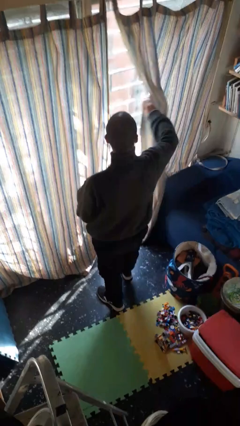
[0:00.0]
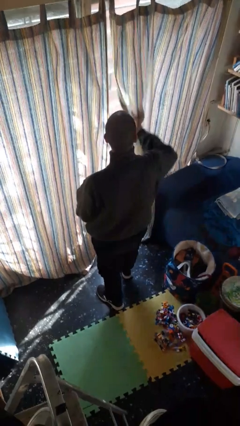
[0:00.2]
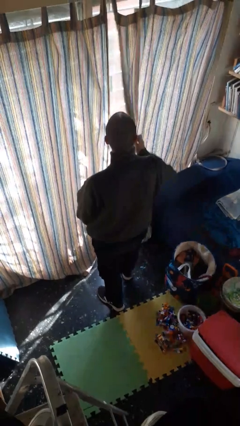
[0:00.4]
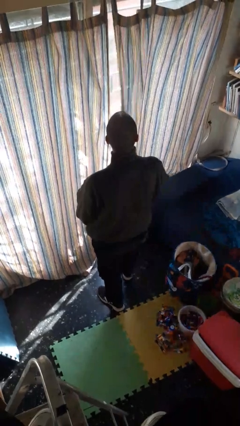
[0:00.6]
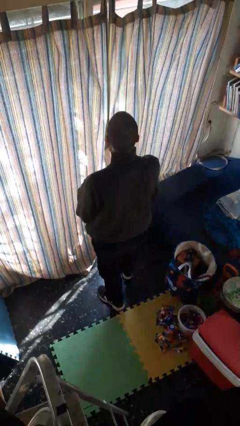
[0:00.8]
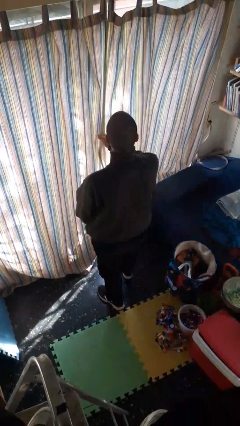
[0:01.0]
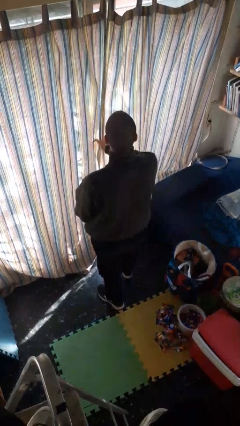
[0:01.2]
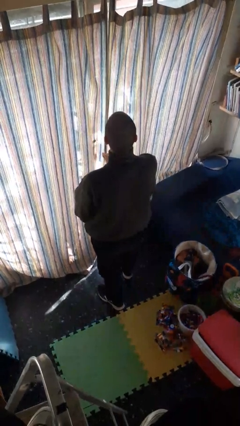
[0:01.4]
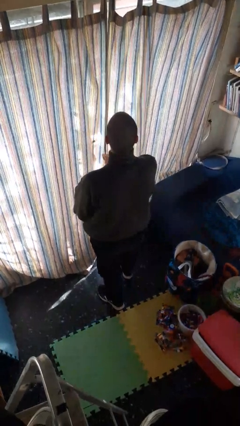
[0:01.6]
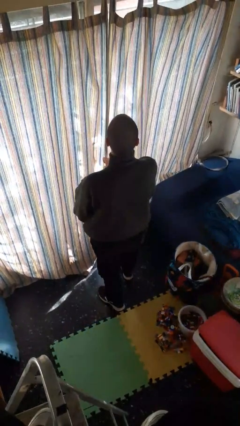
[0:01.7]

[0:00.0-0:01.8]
person closes curtains

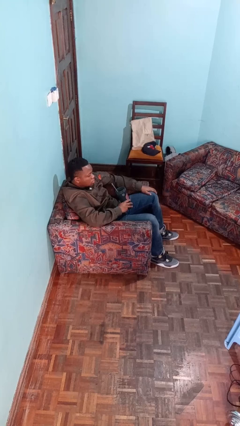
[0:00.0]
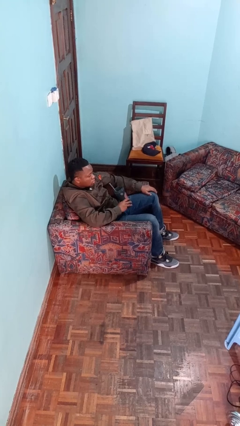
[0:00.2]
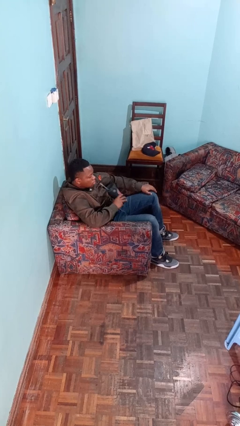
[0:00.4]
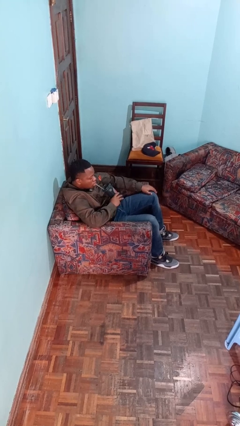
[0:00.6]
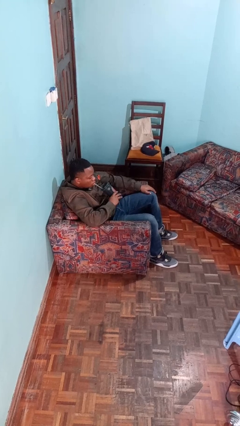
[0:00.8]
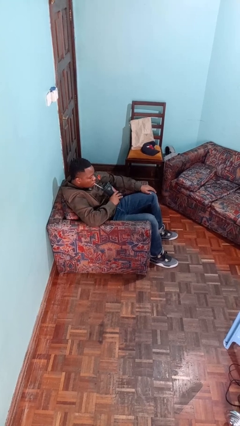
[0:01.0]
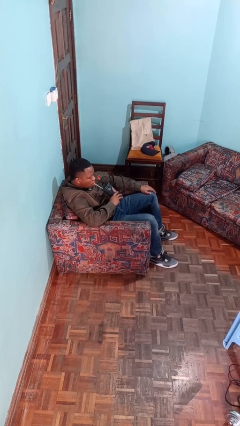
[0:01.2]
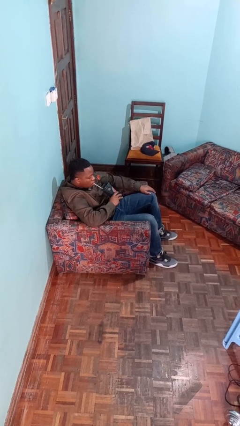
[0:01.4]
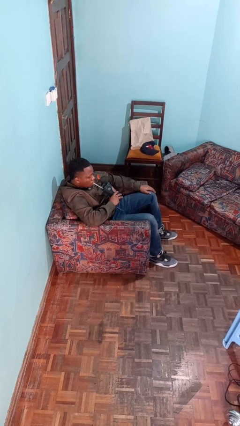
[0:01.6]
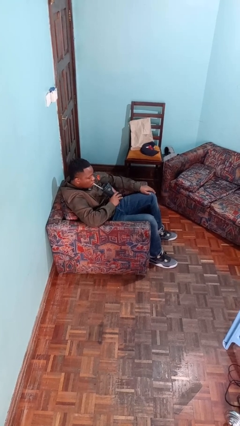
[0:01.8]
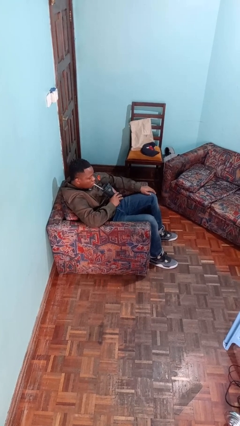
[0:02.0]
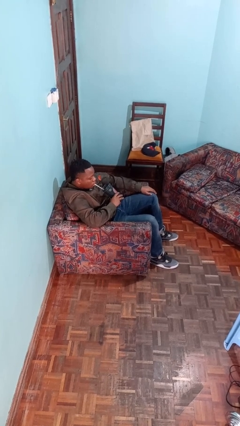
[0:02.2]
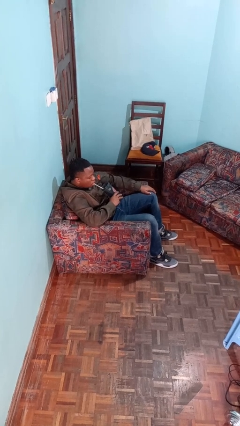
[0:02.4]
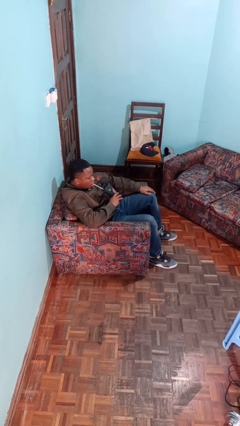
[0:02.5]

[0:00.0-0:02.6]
person drinks from straw

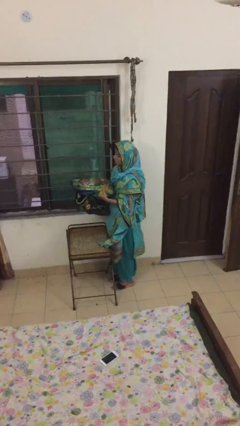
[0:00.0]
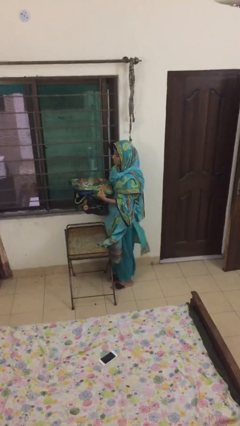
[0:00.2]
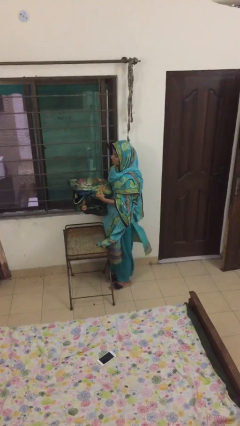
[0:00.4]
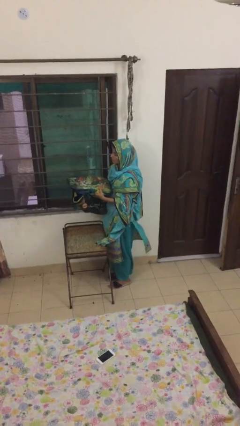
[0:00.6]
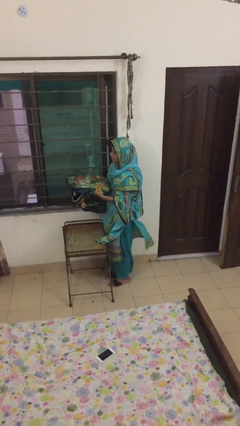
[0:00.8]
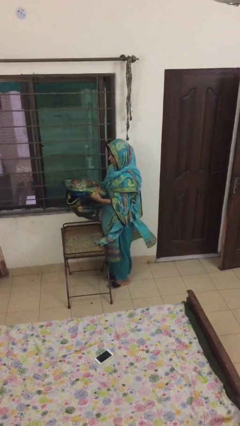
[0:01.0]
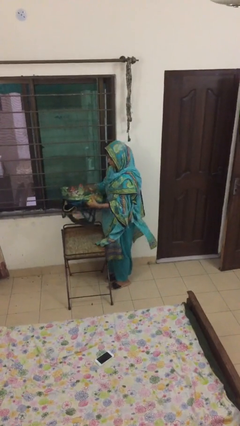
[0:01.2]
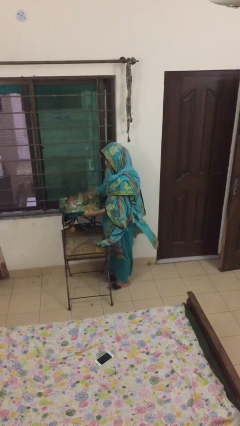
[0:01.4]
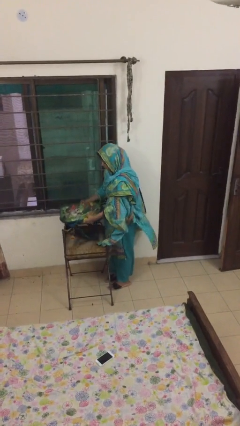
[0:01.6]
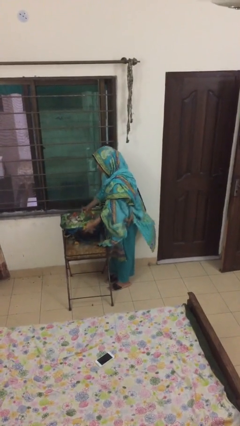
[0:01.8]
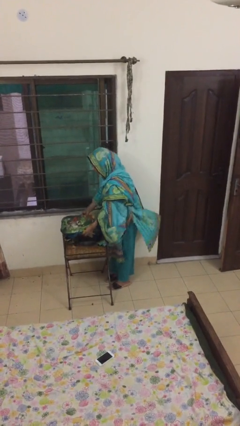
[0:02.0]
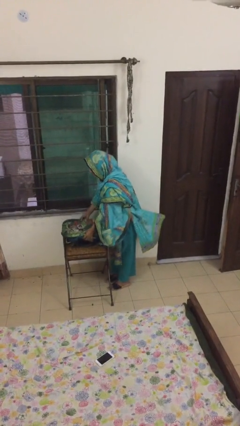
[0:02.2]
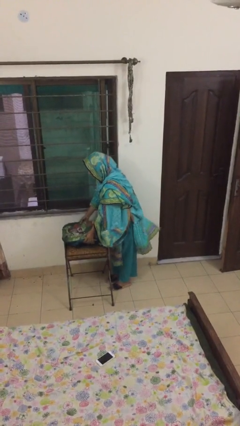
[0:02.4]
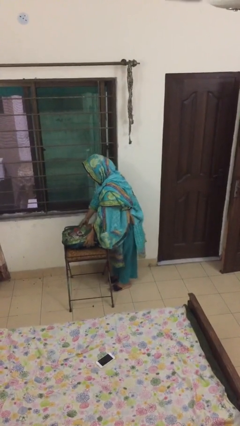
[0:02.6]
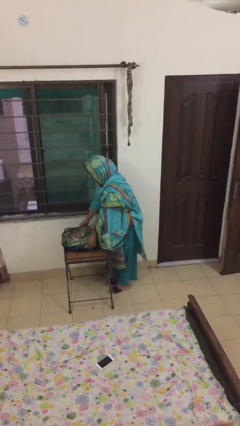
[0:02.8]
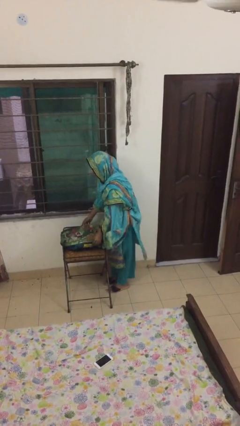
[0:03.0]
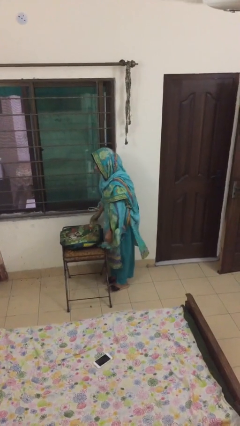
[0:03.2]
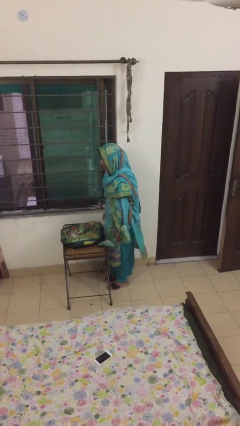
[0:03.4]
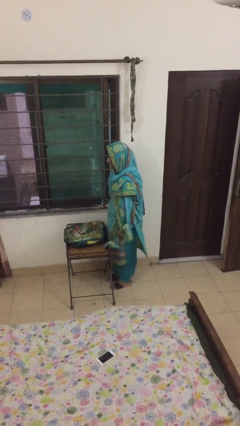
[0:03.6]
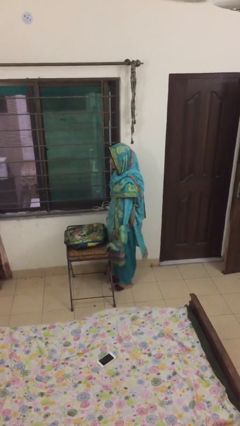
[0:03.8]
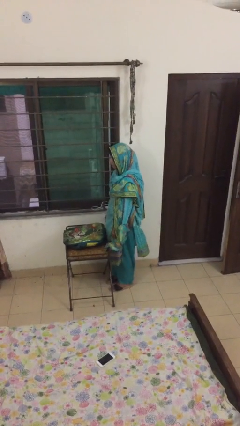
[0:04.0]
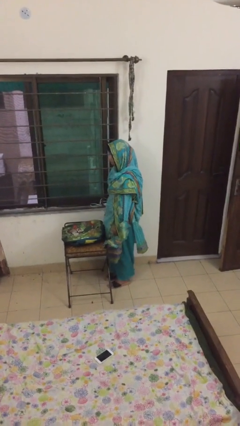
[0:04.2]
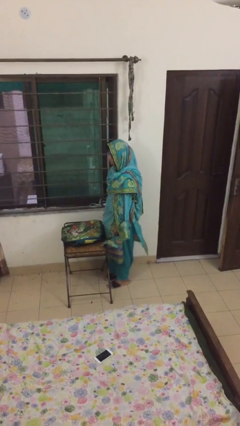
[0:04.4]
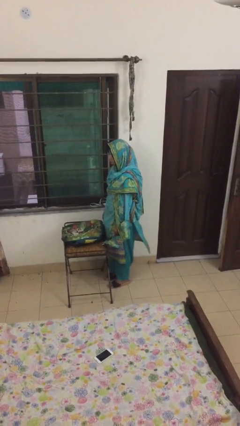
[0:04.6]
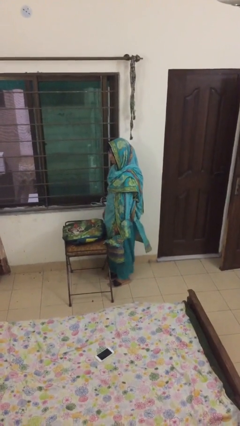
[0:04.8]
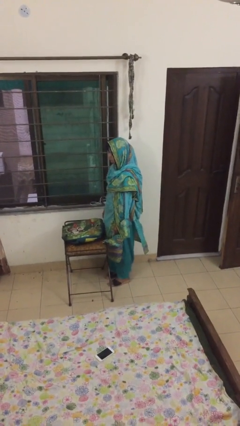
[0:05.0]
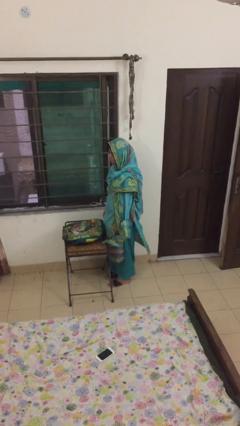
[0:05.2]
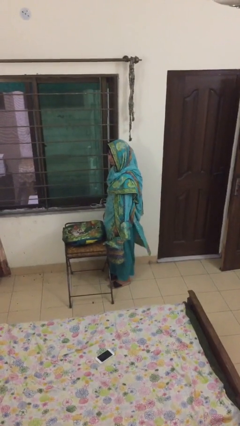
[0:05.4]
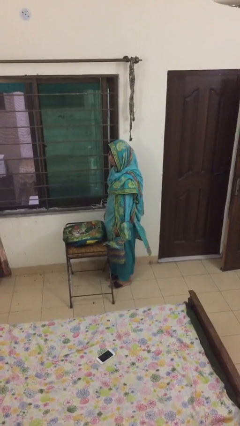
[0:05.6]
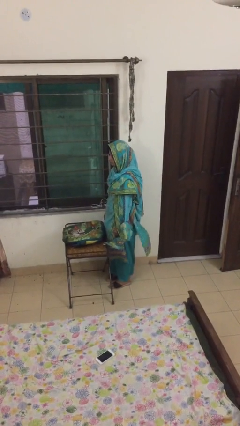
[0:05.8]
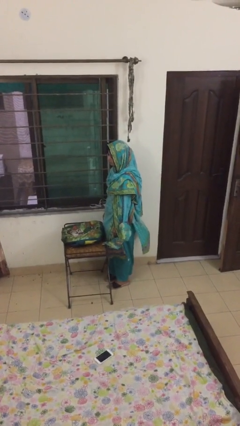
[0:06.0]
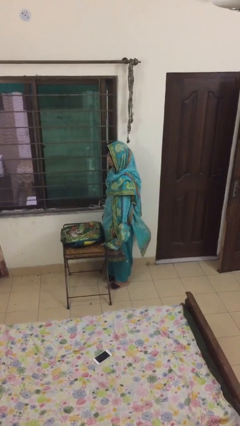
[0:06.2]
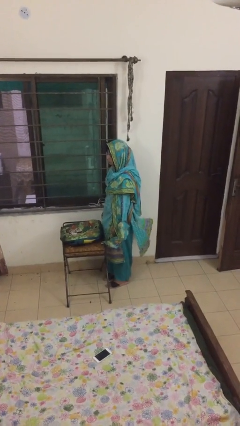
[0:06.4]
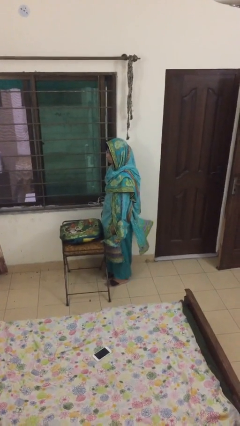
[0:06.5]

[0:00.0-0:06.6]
person puts down object on table

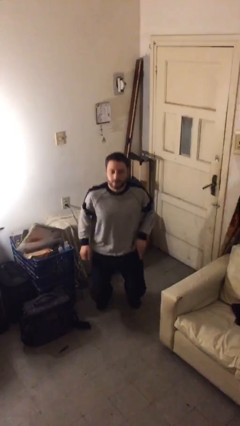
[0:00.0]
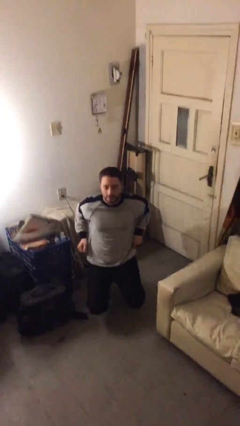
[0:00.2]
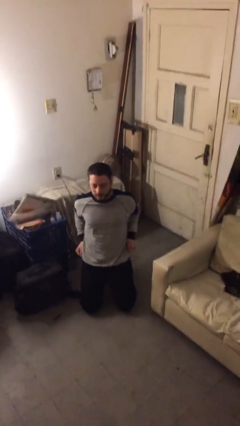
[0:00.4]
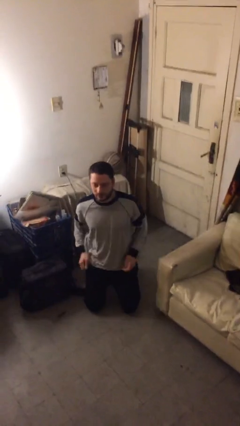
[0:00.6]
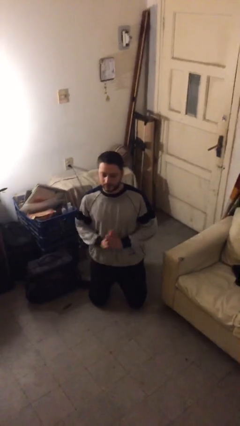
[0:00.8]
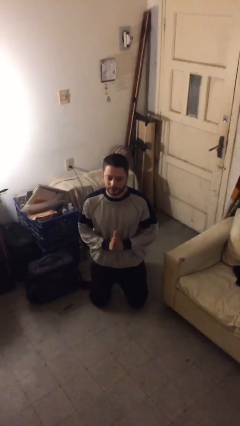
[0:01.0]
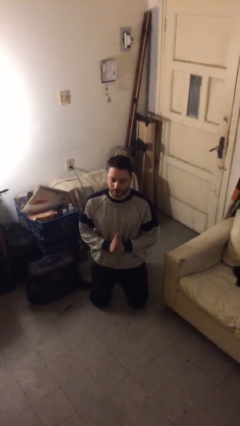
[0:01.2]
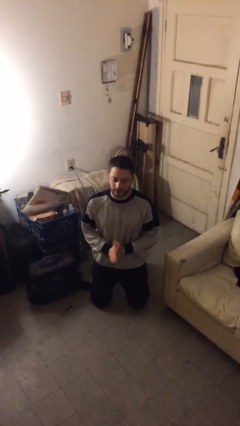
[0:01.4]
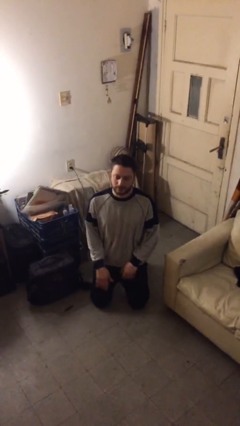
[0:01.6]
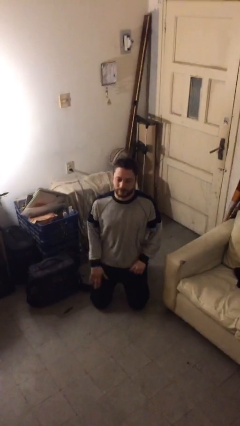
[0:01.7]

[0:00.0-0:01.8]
person crawls

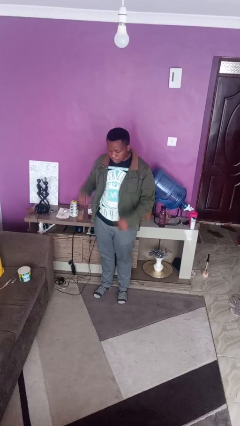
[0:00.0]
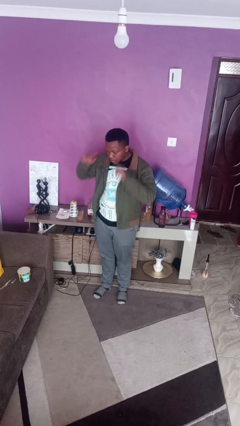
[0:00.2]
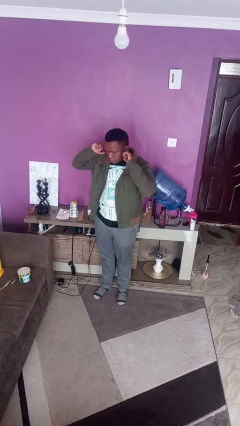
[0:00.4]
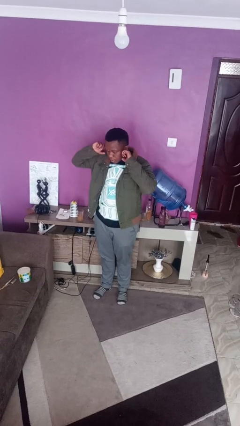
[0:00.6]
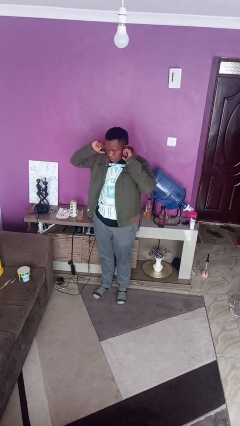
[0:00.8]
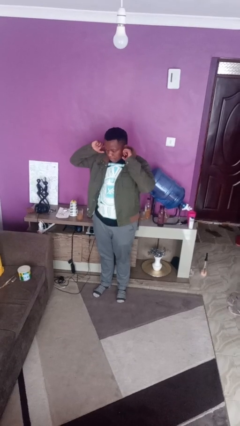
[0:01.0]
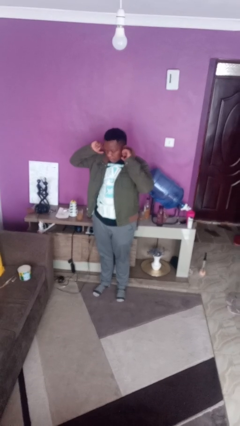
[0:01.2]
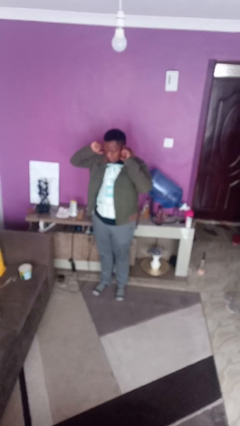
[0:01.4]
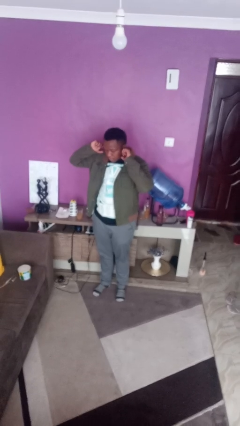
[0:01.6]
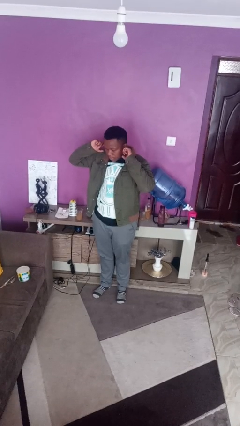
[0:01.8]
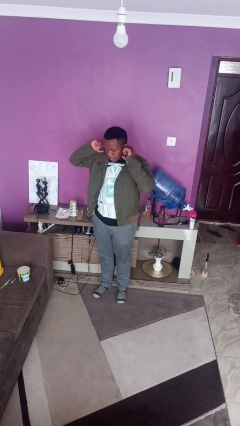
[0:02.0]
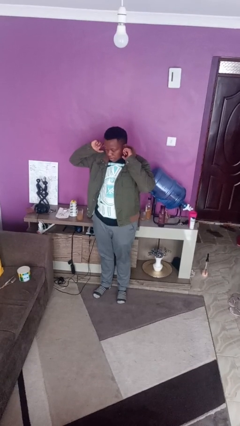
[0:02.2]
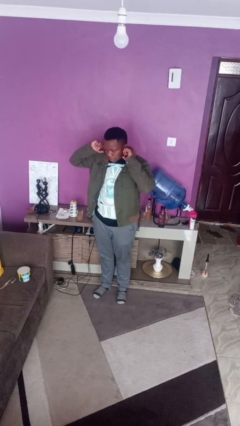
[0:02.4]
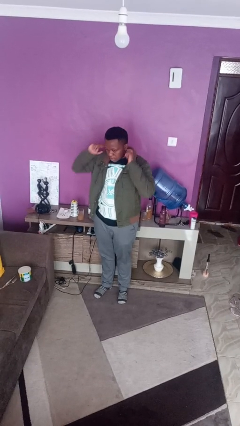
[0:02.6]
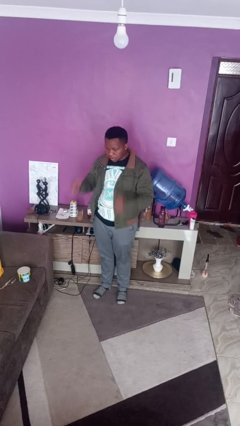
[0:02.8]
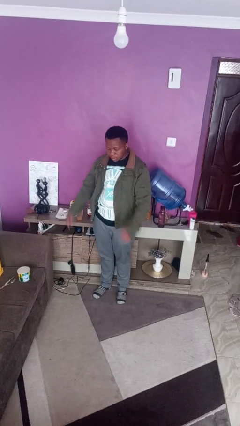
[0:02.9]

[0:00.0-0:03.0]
person puts fingers in ear

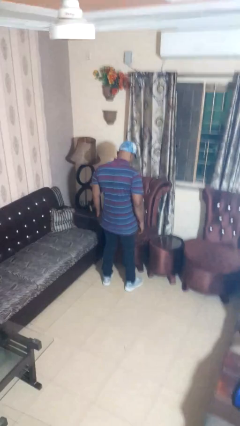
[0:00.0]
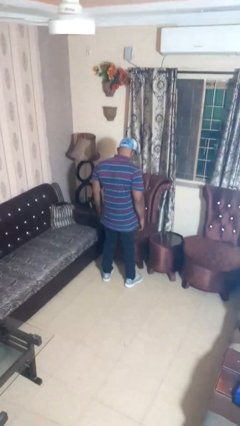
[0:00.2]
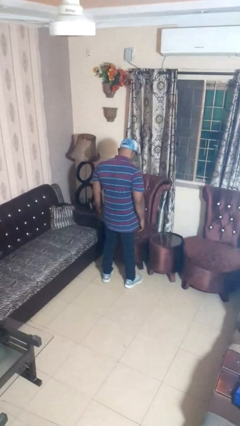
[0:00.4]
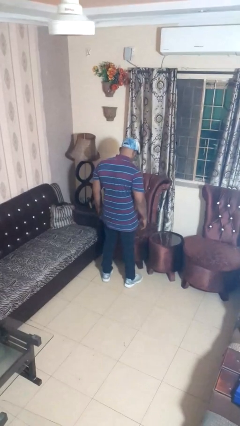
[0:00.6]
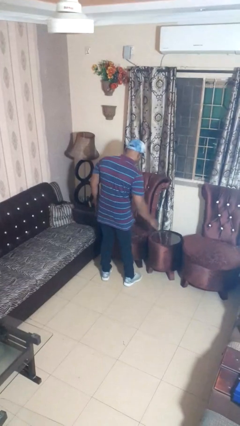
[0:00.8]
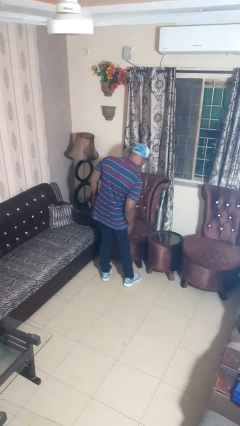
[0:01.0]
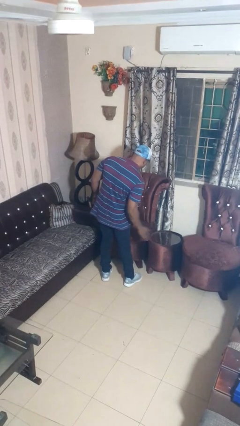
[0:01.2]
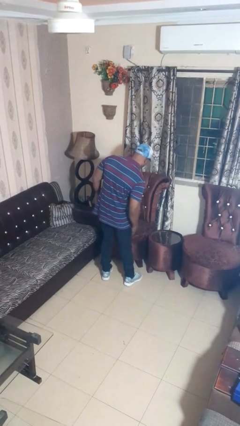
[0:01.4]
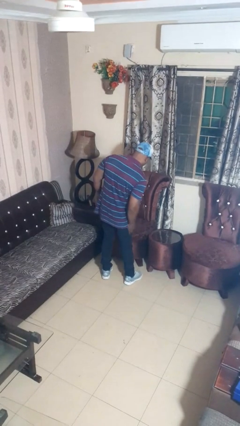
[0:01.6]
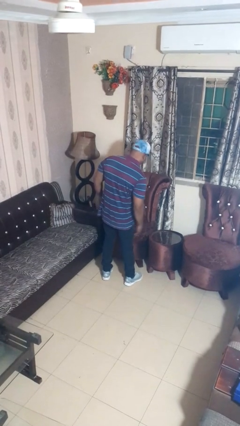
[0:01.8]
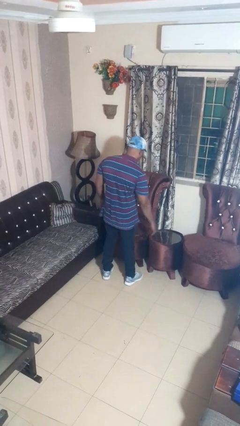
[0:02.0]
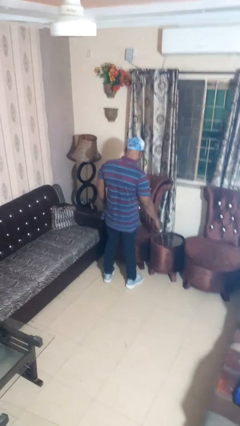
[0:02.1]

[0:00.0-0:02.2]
person slaps hands on thighs
